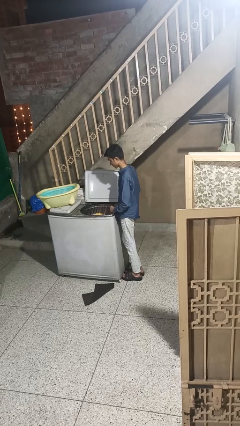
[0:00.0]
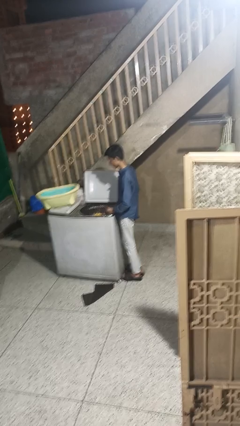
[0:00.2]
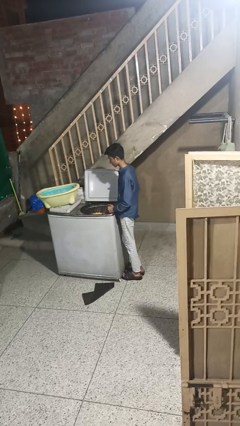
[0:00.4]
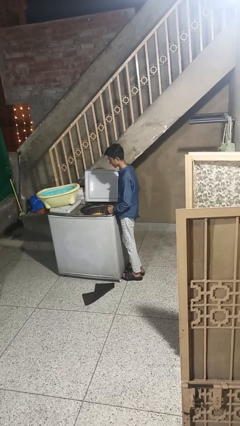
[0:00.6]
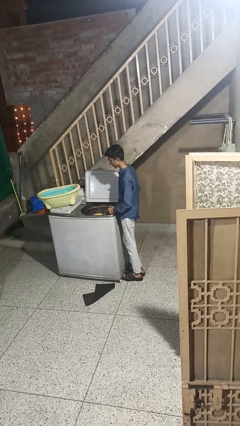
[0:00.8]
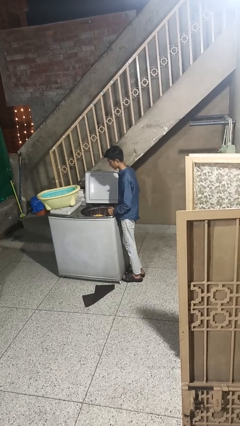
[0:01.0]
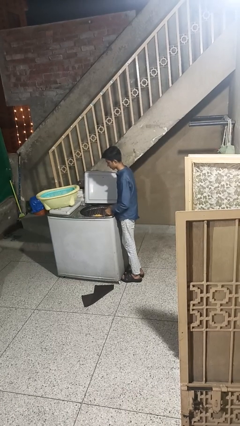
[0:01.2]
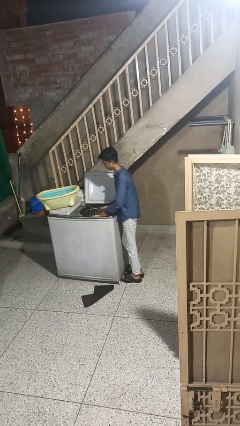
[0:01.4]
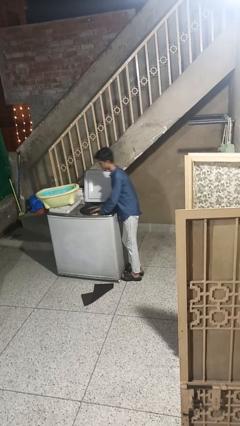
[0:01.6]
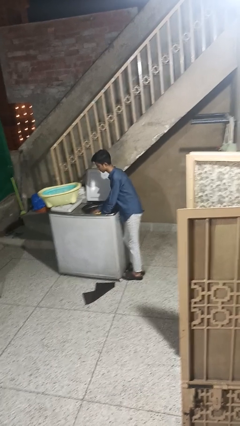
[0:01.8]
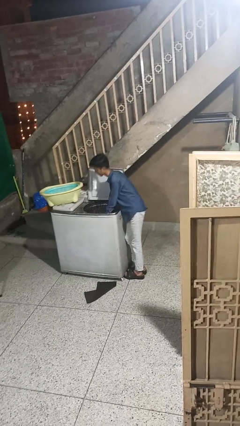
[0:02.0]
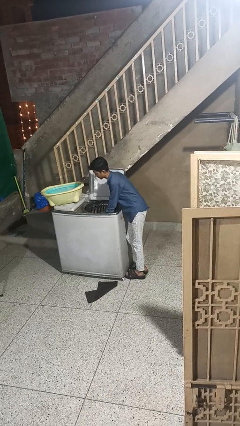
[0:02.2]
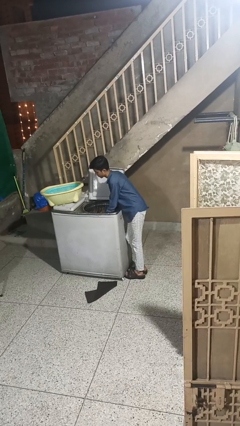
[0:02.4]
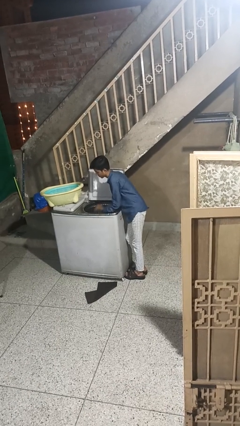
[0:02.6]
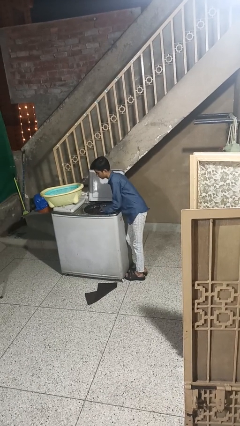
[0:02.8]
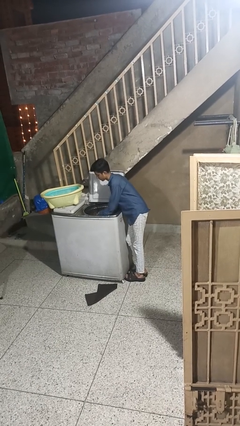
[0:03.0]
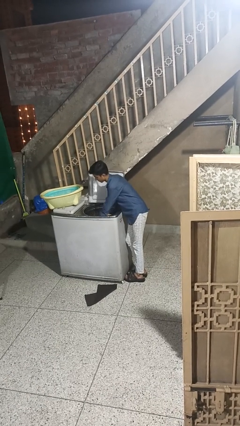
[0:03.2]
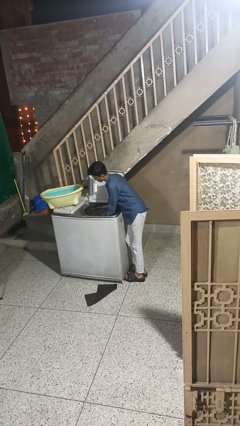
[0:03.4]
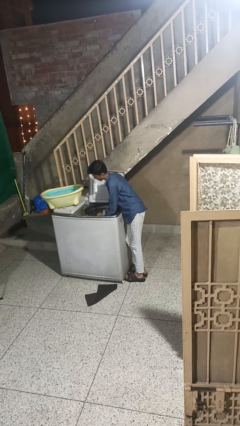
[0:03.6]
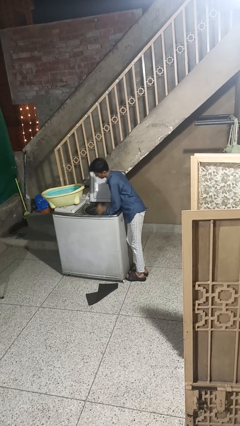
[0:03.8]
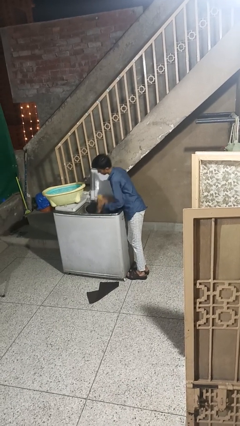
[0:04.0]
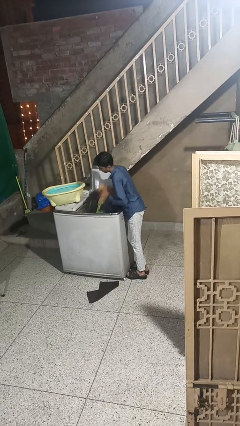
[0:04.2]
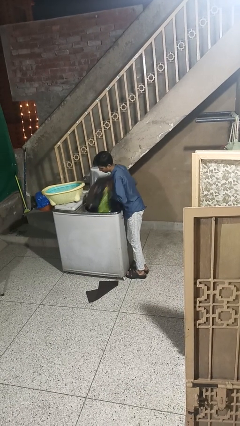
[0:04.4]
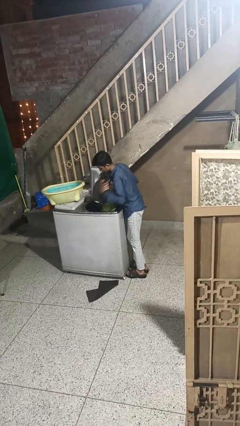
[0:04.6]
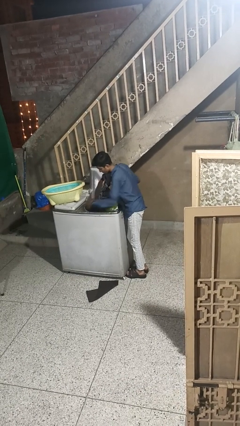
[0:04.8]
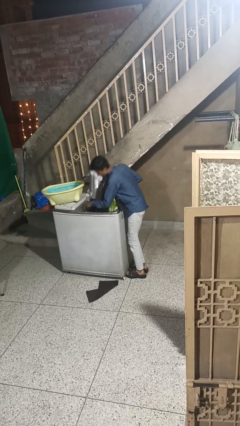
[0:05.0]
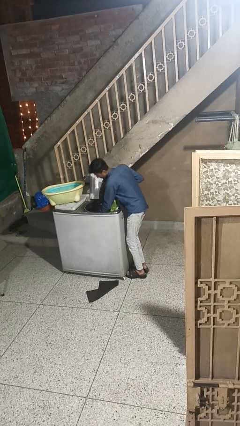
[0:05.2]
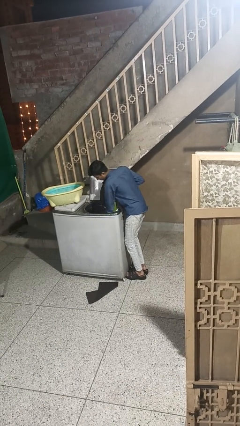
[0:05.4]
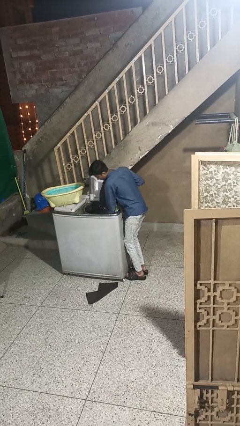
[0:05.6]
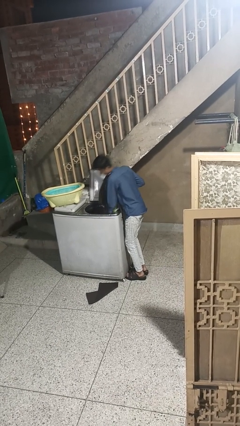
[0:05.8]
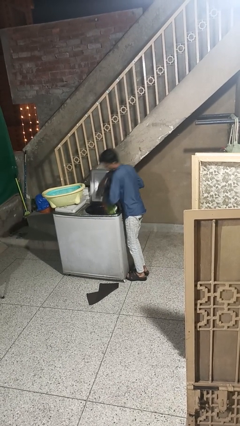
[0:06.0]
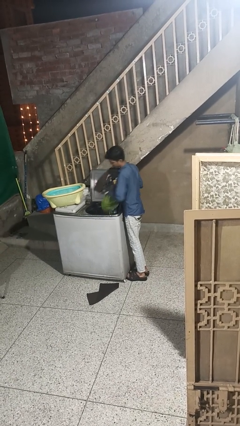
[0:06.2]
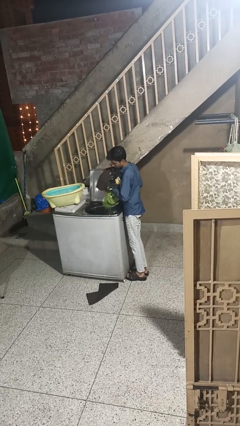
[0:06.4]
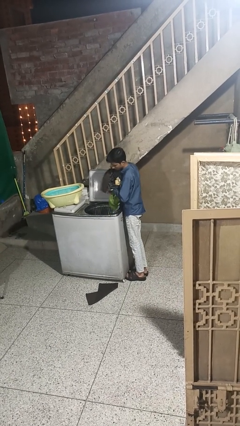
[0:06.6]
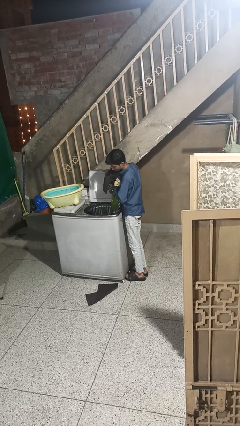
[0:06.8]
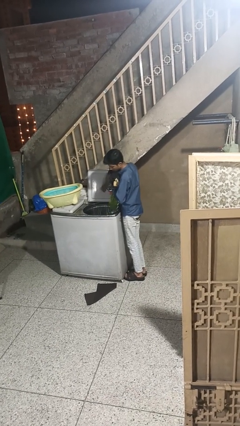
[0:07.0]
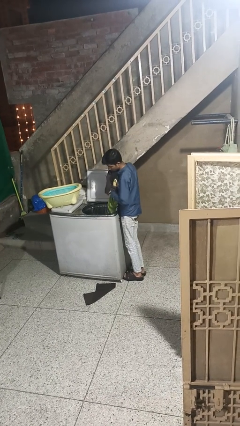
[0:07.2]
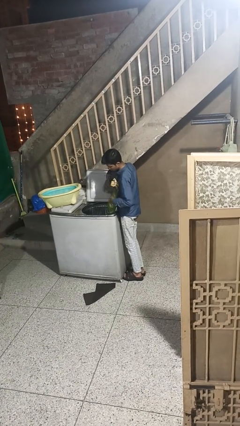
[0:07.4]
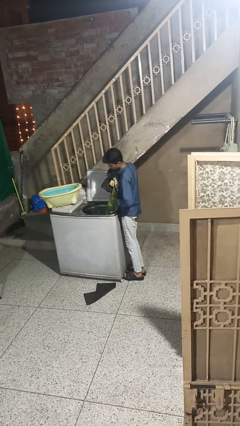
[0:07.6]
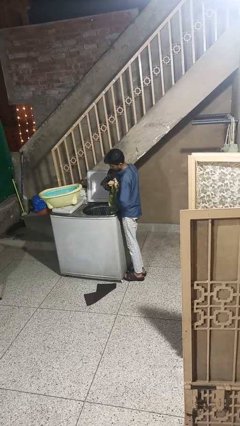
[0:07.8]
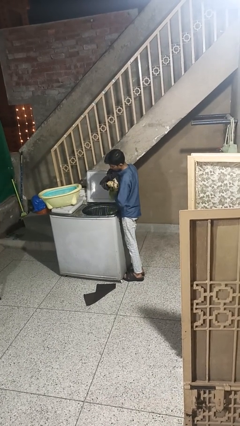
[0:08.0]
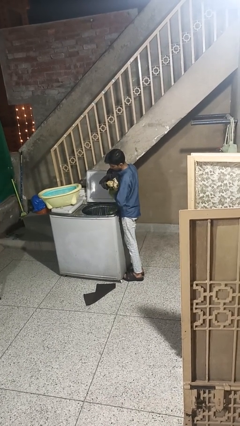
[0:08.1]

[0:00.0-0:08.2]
person loads clotheswasher

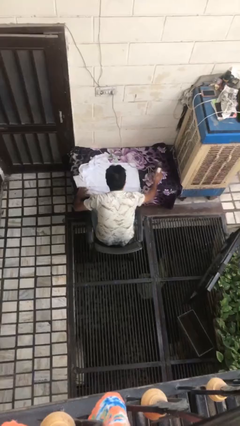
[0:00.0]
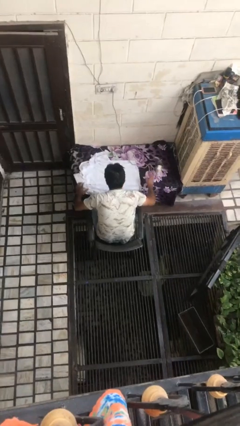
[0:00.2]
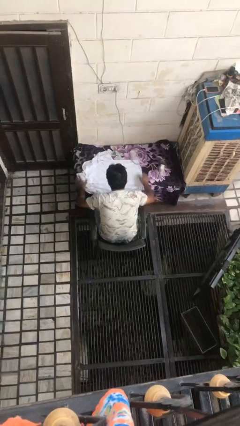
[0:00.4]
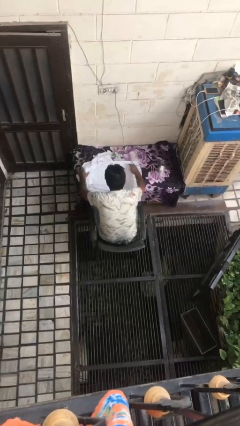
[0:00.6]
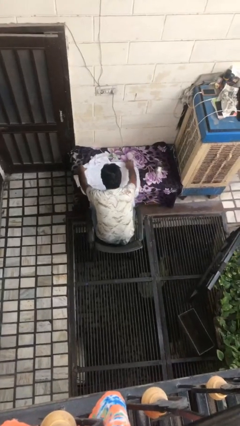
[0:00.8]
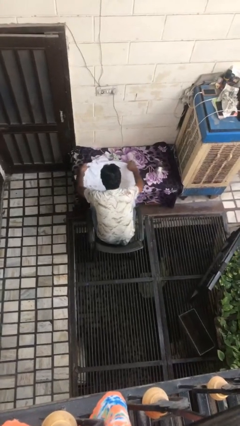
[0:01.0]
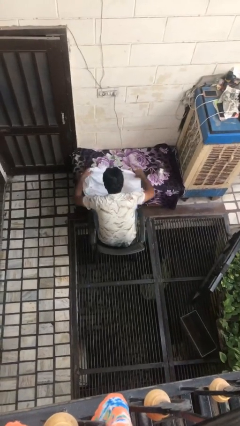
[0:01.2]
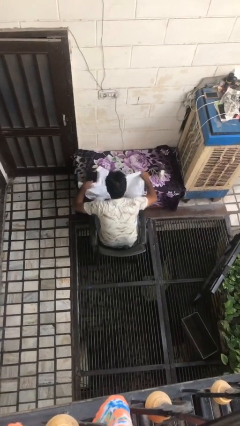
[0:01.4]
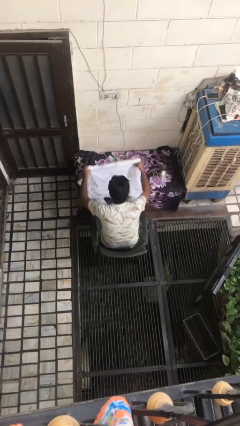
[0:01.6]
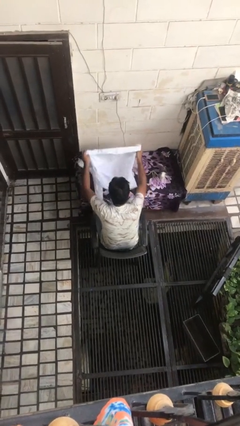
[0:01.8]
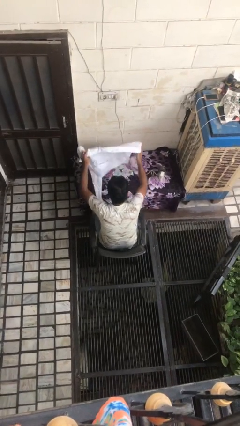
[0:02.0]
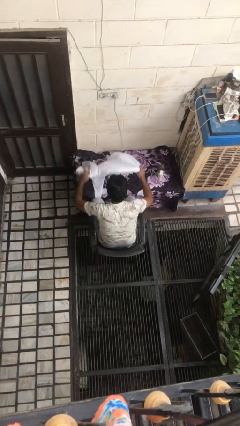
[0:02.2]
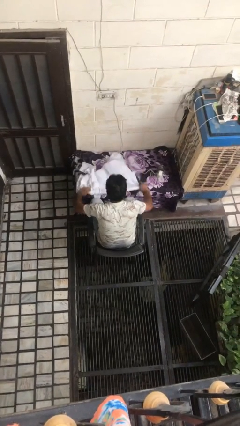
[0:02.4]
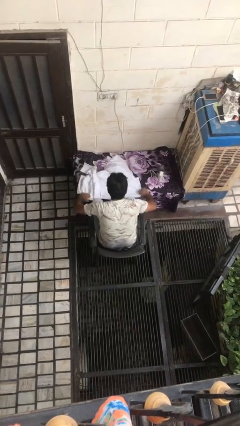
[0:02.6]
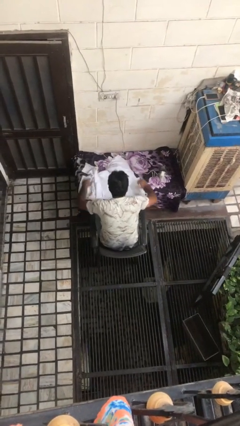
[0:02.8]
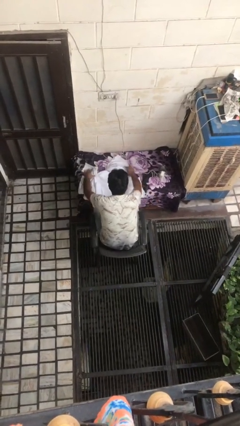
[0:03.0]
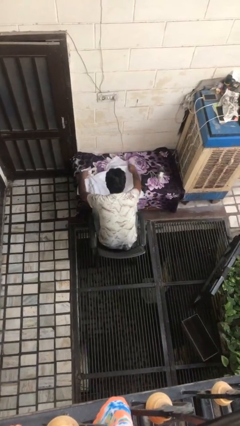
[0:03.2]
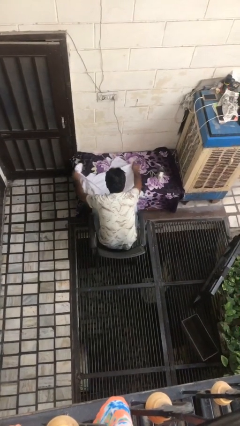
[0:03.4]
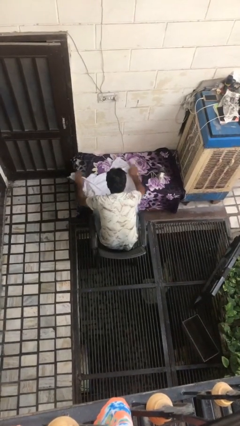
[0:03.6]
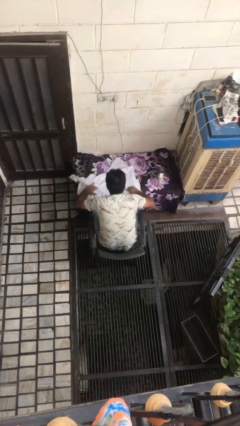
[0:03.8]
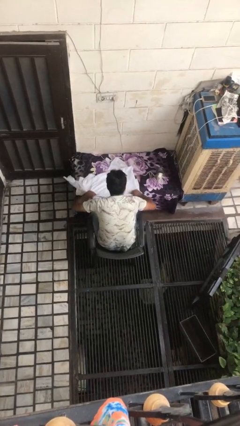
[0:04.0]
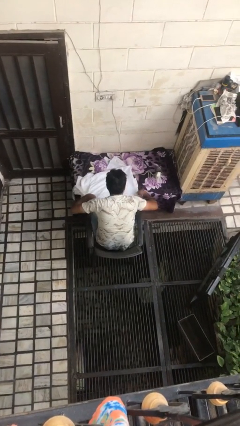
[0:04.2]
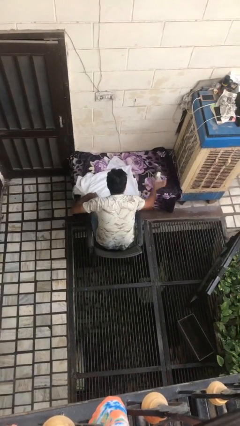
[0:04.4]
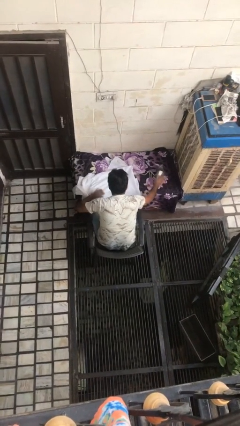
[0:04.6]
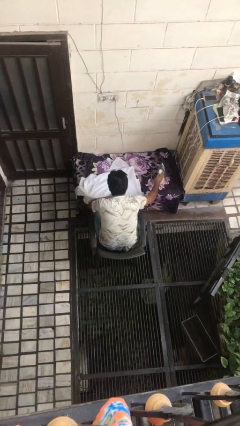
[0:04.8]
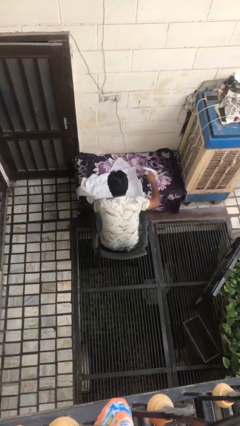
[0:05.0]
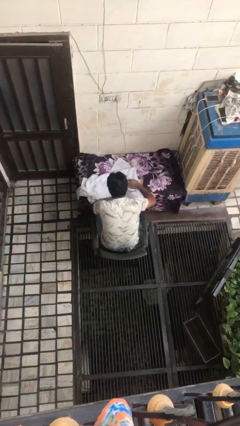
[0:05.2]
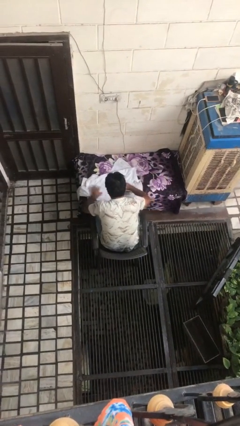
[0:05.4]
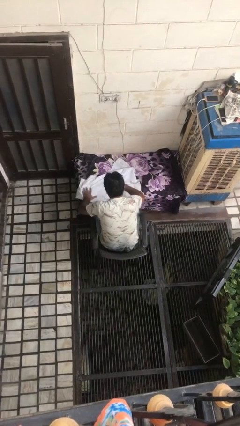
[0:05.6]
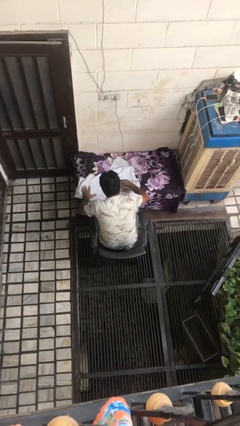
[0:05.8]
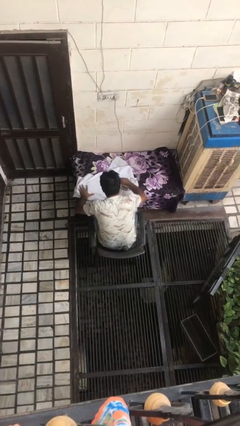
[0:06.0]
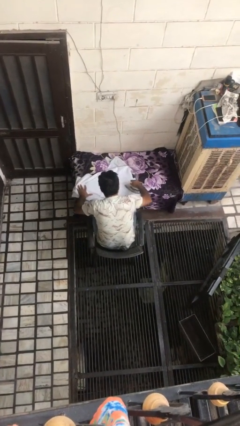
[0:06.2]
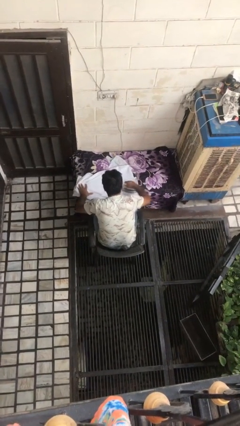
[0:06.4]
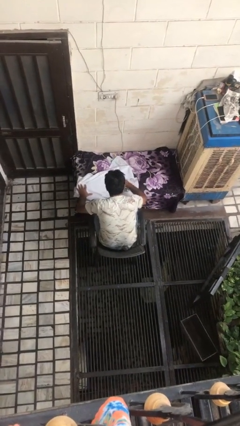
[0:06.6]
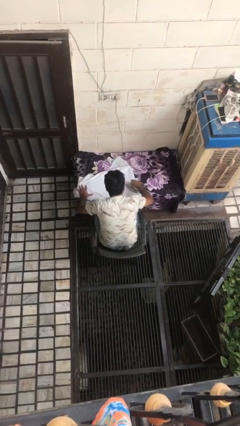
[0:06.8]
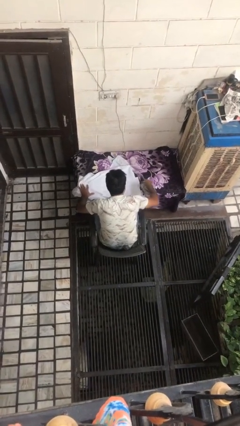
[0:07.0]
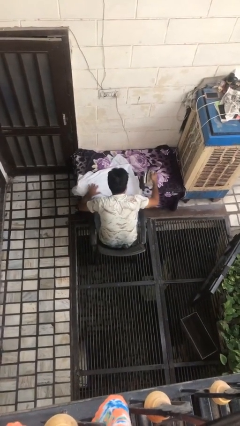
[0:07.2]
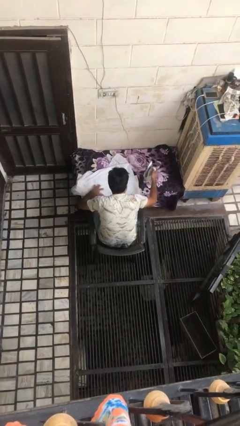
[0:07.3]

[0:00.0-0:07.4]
person irons clothes

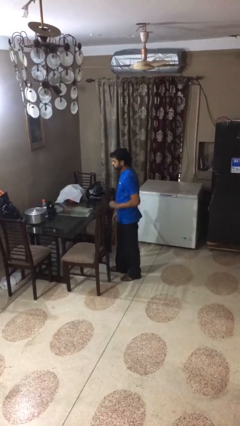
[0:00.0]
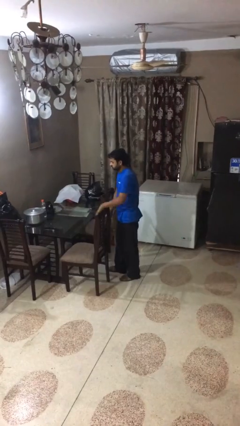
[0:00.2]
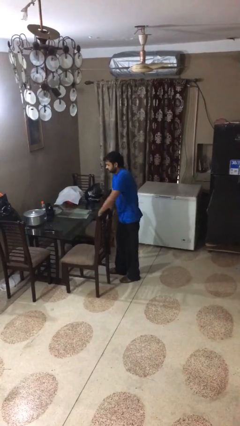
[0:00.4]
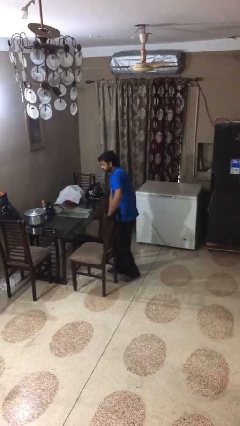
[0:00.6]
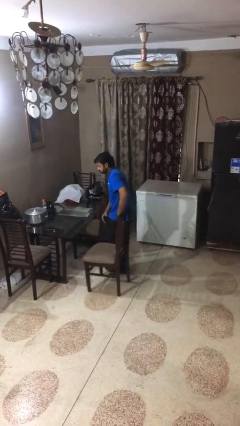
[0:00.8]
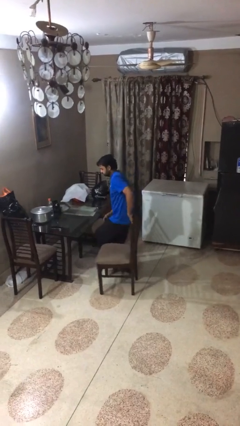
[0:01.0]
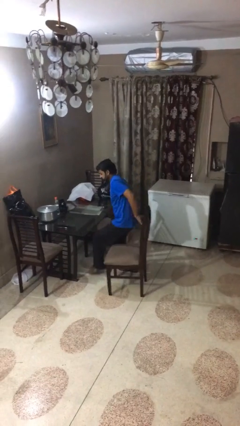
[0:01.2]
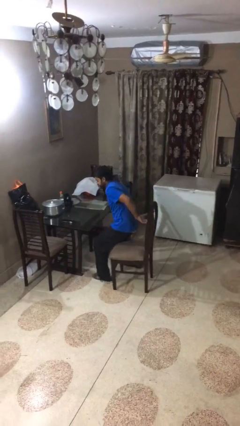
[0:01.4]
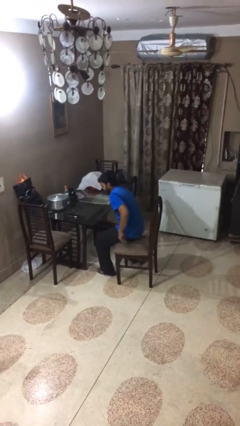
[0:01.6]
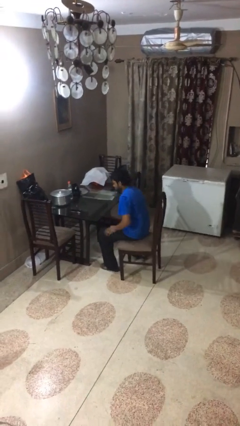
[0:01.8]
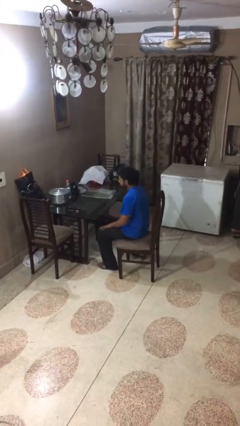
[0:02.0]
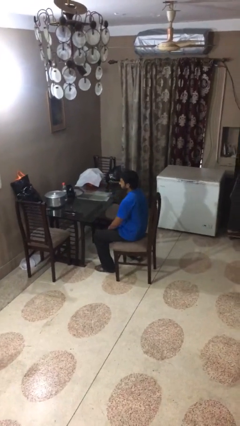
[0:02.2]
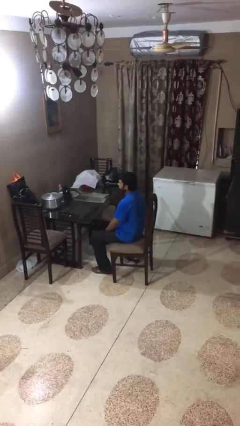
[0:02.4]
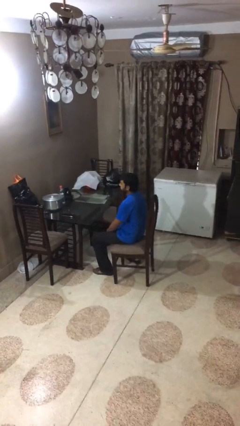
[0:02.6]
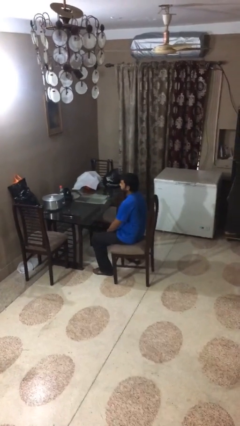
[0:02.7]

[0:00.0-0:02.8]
person sits down
